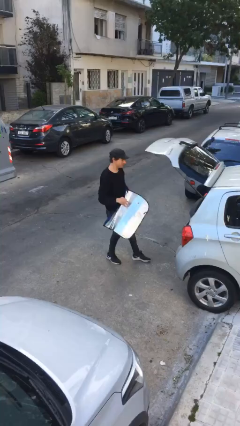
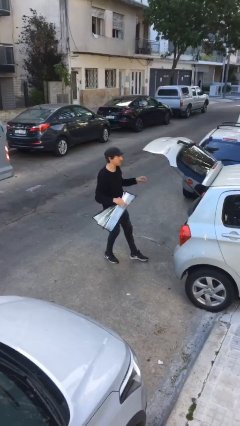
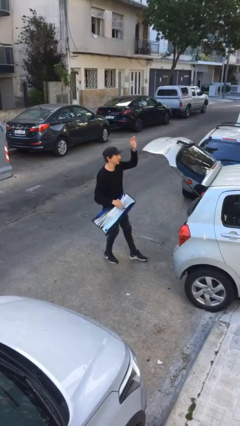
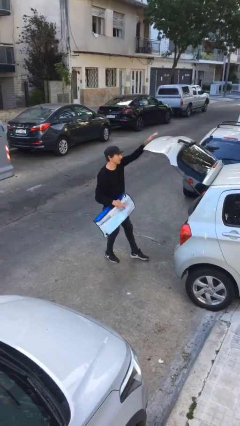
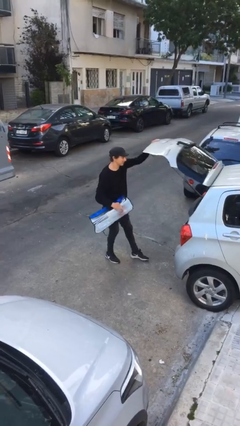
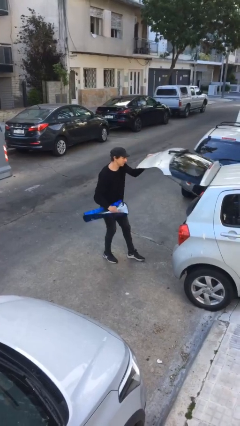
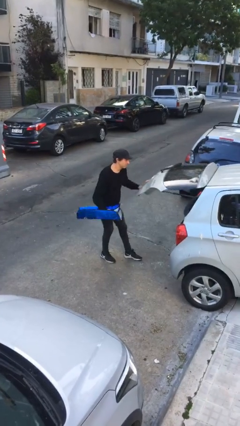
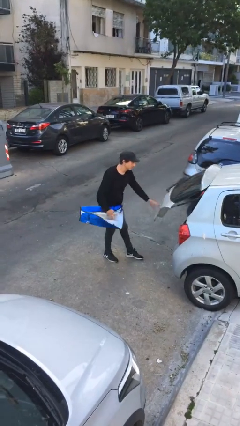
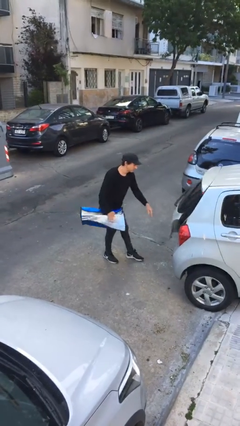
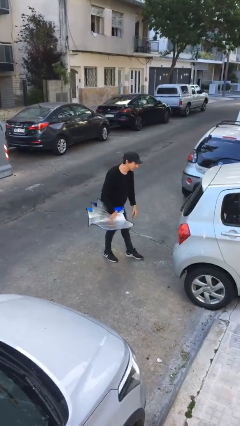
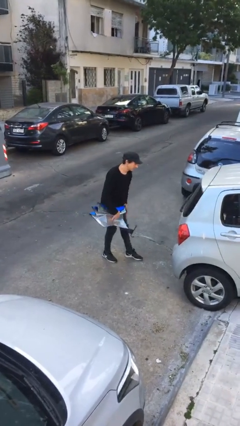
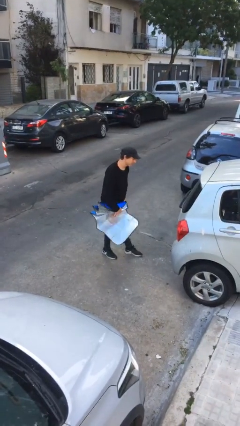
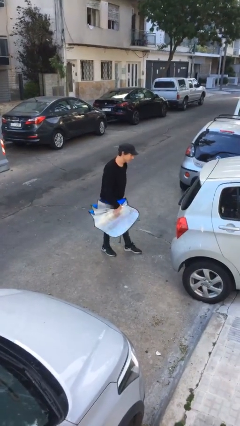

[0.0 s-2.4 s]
person closes car trunk

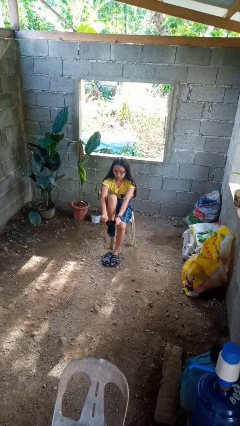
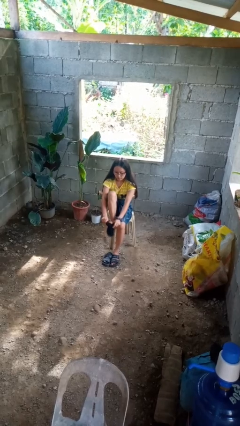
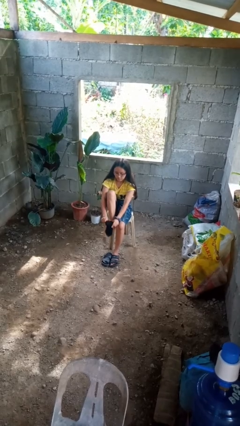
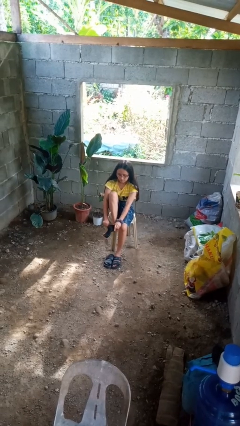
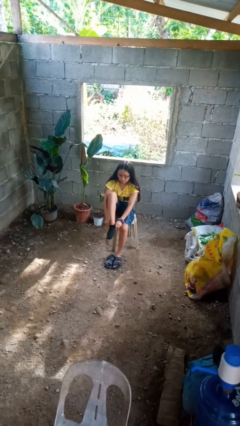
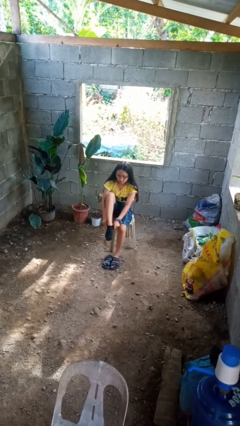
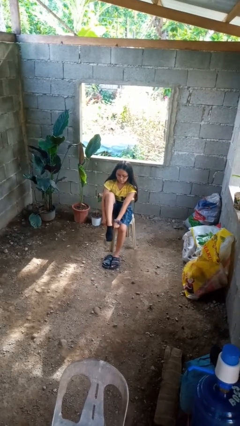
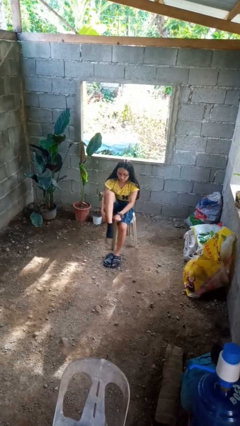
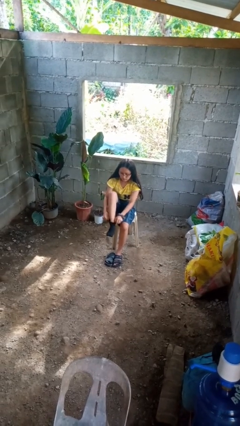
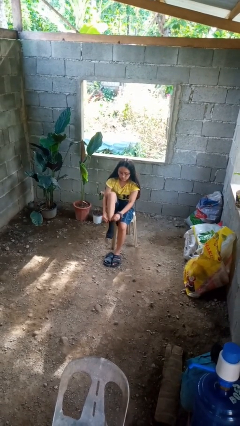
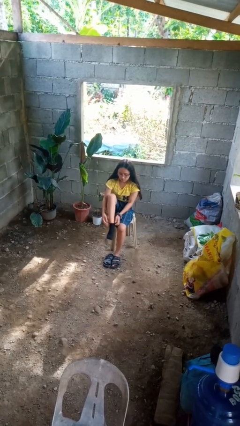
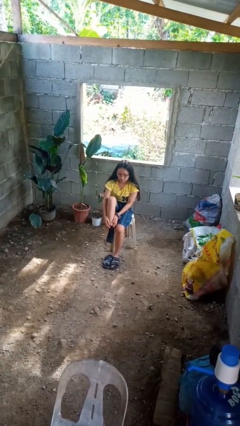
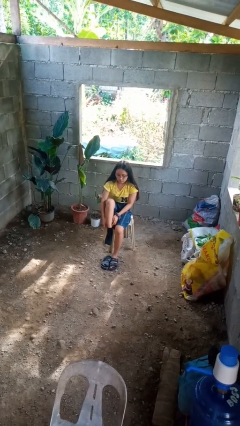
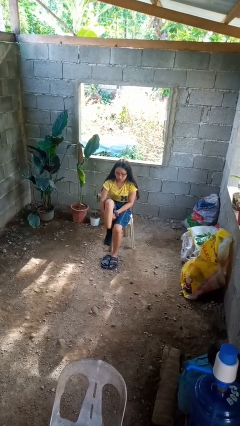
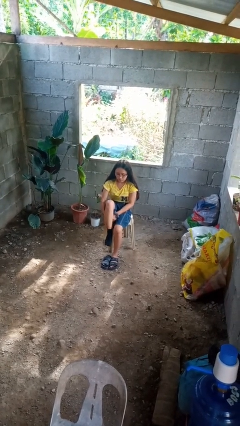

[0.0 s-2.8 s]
person puts on socks

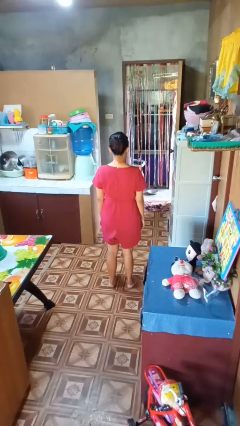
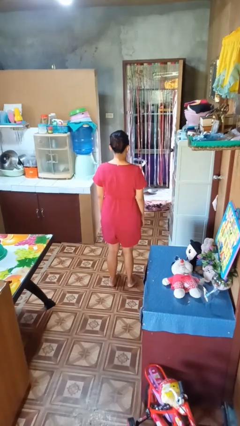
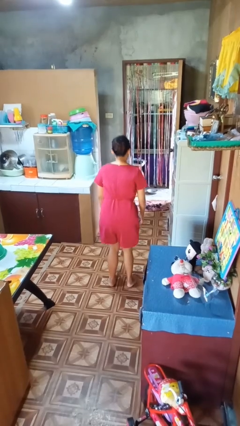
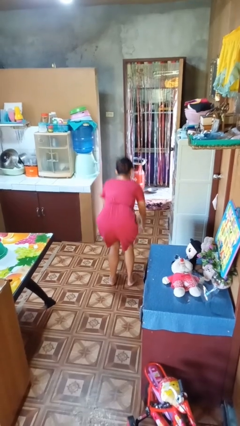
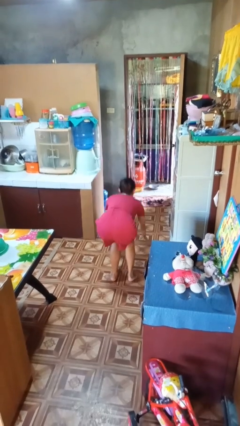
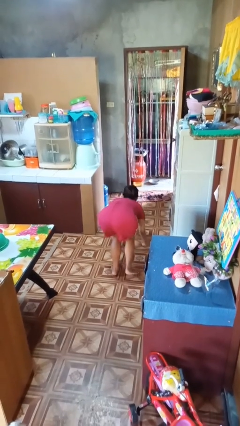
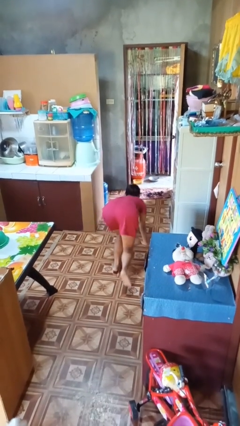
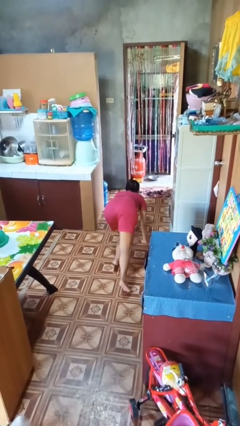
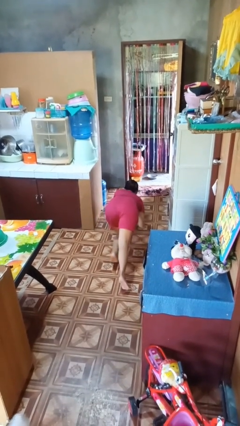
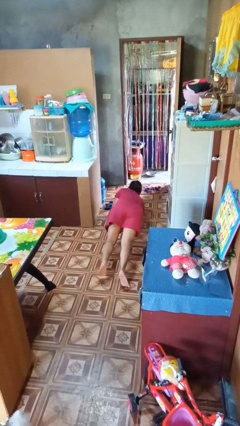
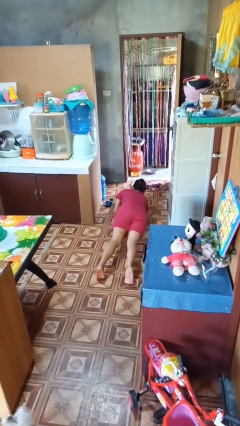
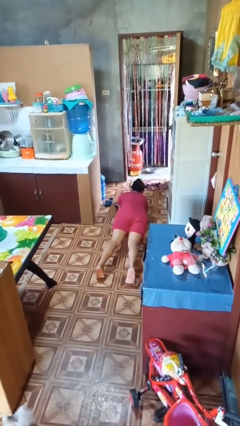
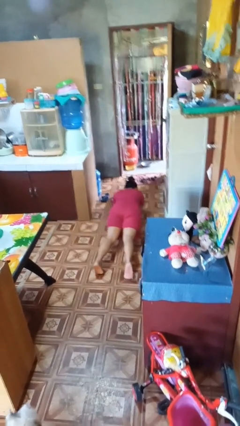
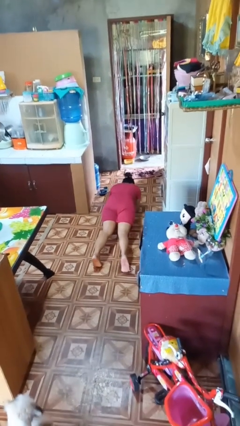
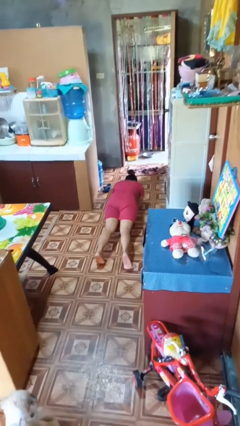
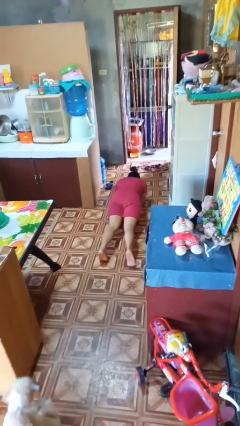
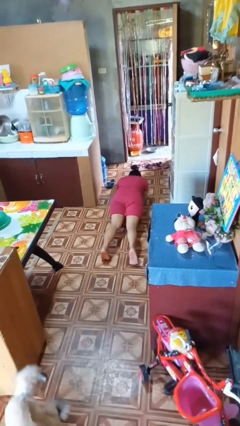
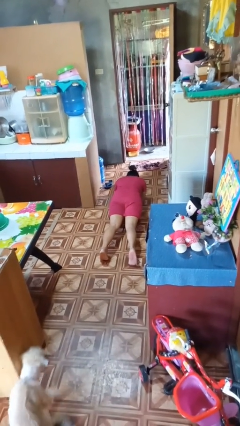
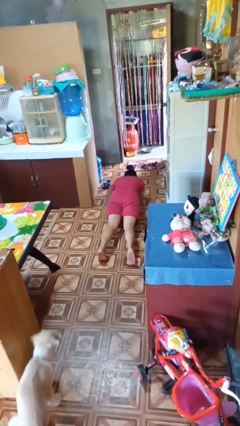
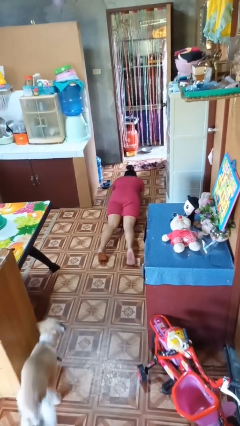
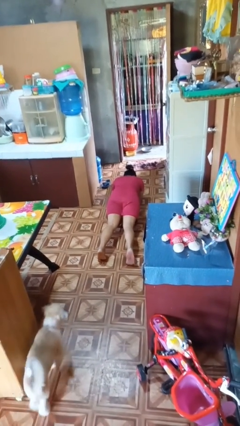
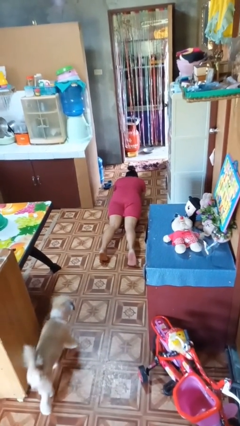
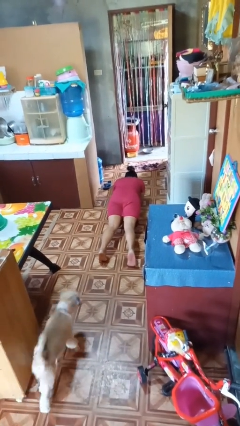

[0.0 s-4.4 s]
person exercises with plank

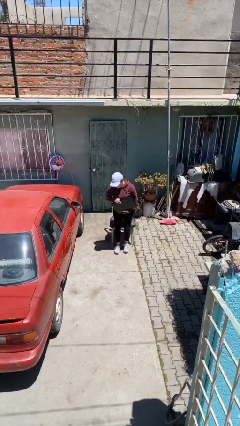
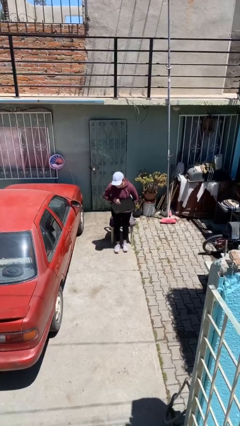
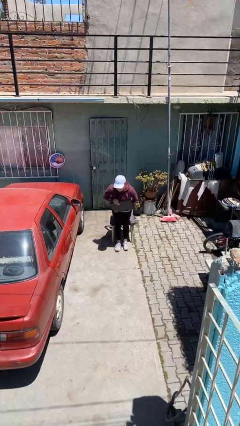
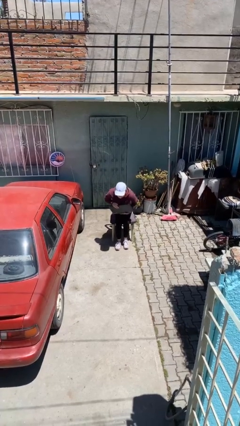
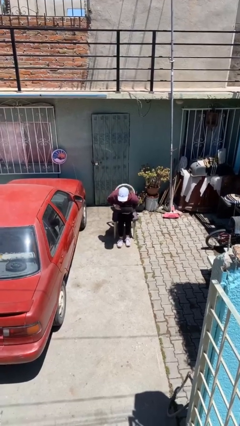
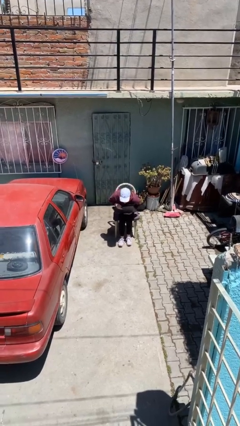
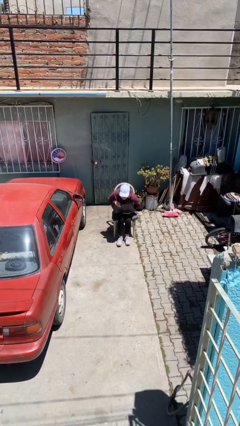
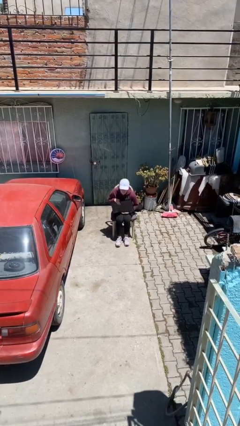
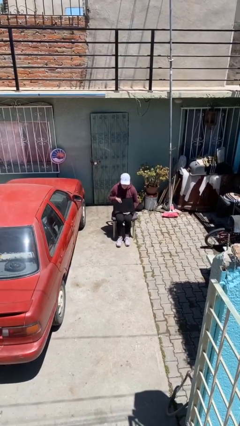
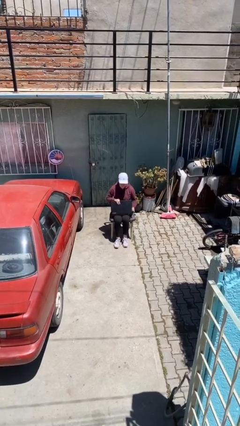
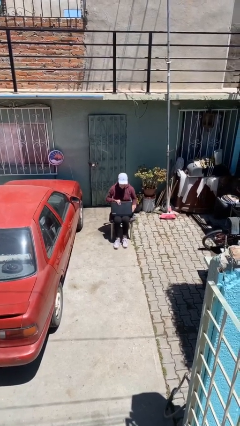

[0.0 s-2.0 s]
person sits down

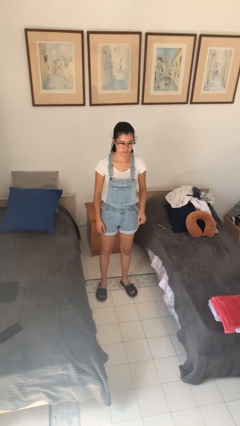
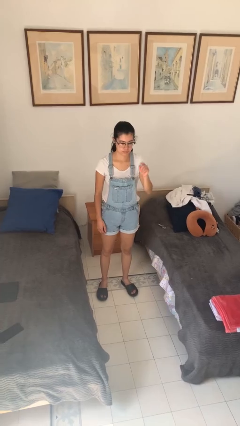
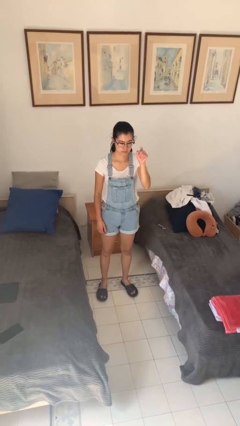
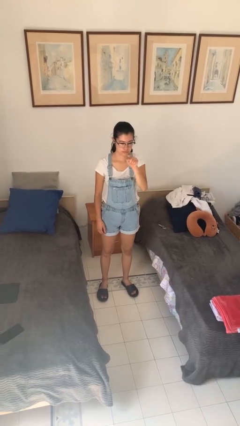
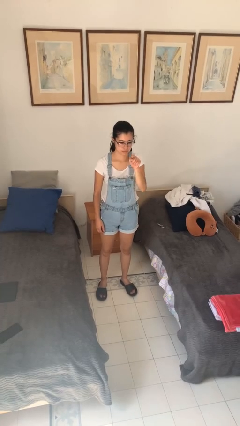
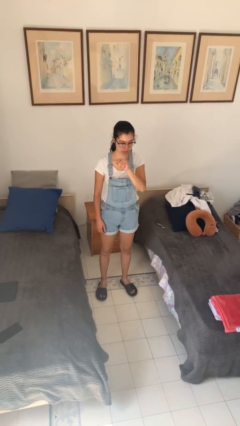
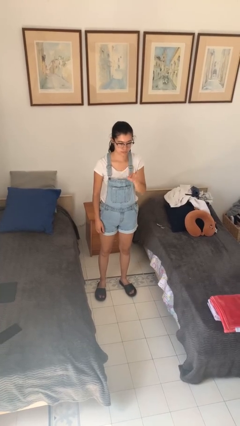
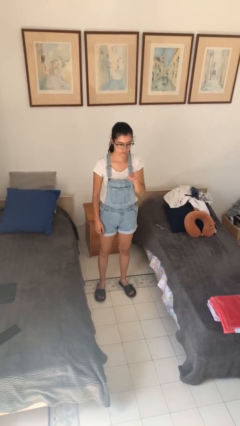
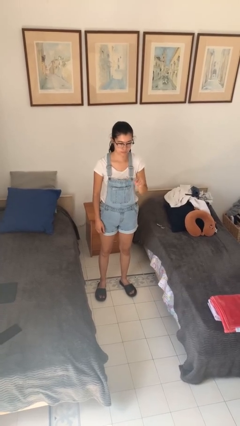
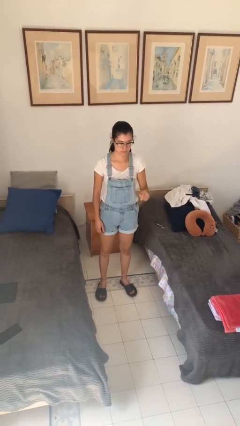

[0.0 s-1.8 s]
person gestures number three

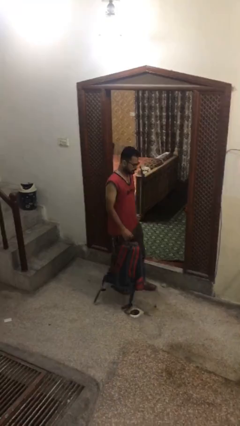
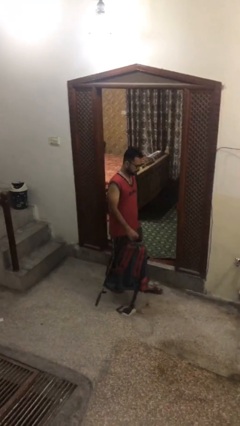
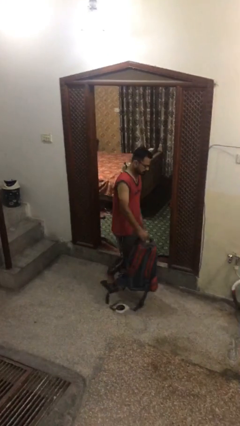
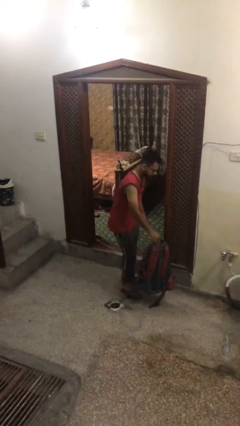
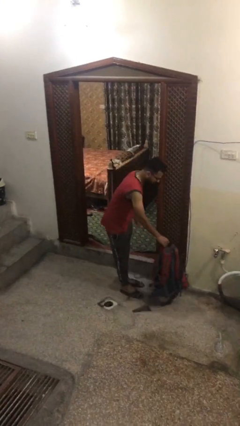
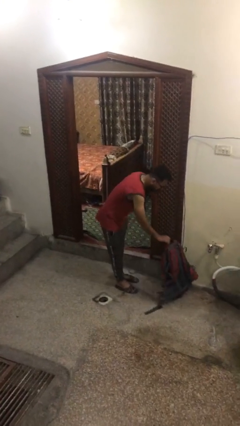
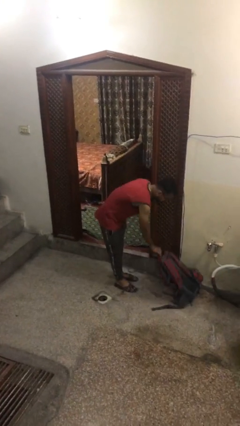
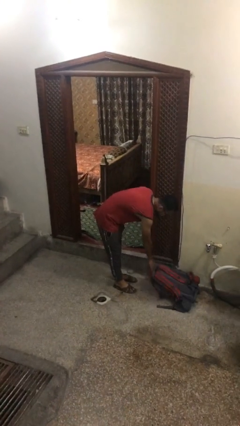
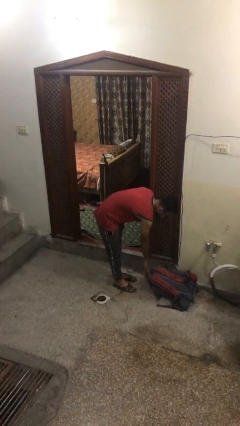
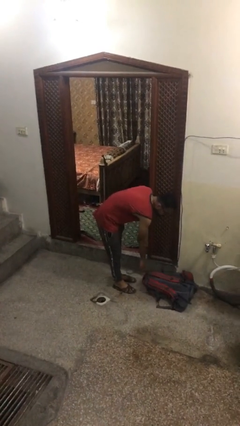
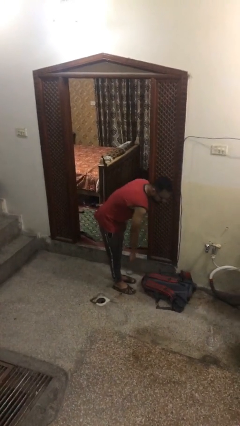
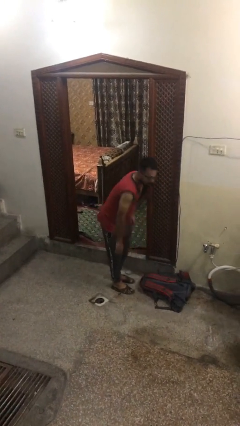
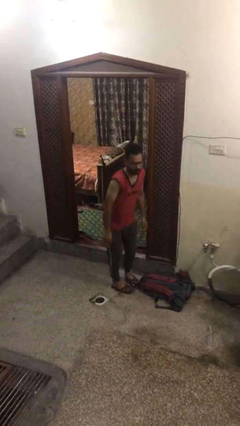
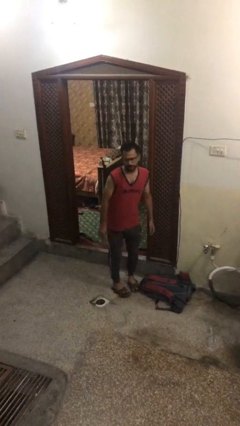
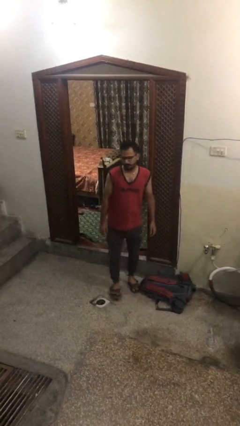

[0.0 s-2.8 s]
person puts down object on floor

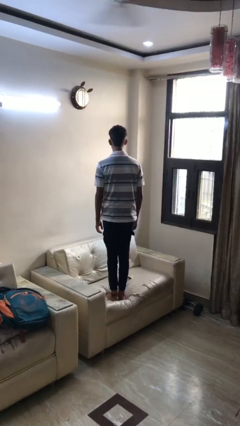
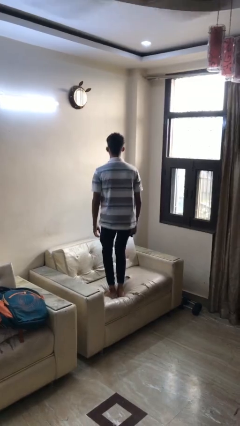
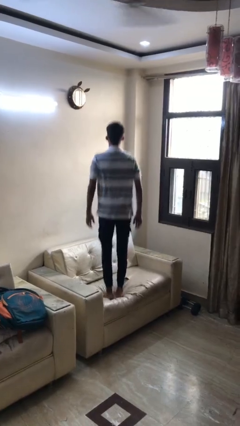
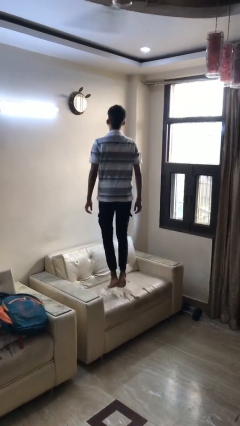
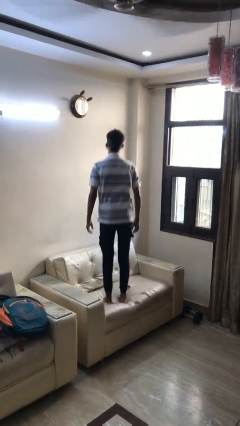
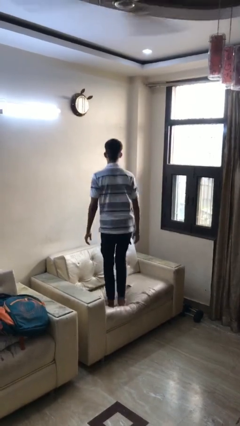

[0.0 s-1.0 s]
person jumps on couch
